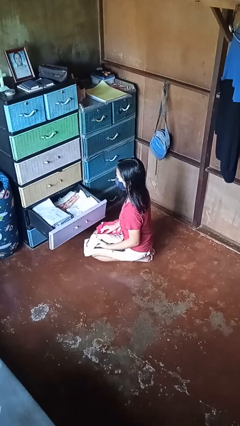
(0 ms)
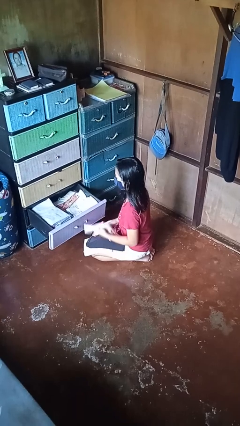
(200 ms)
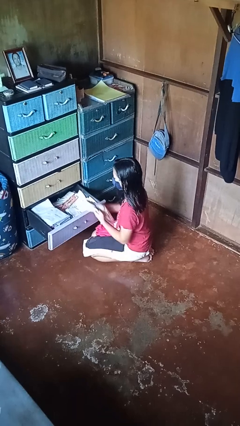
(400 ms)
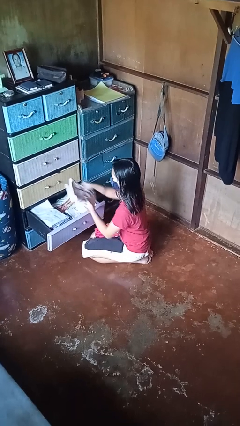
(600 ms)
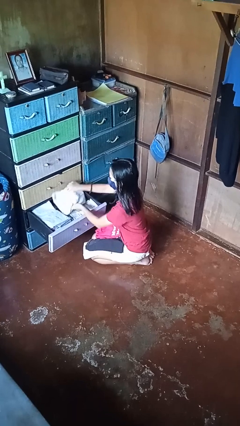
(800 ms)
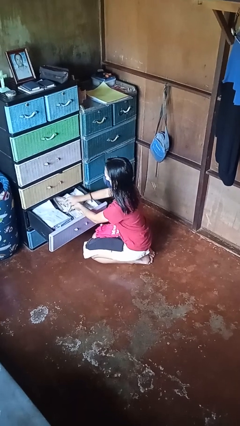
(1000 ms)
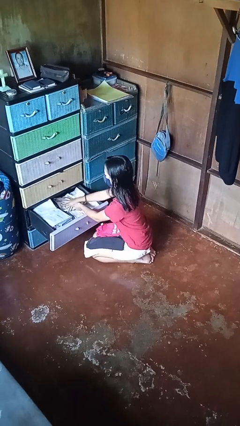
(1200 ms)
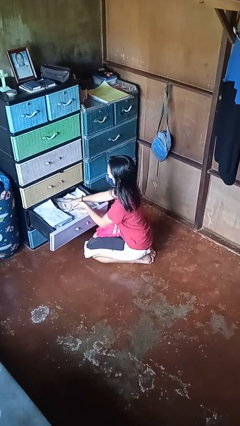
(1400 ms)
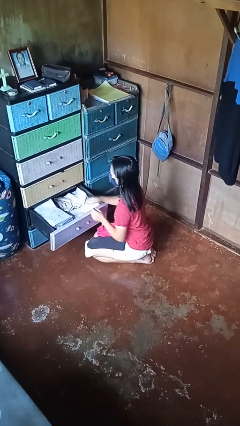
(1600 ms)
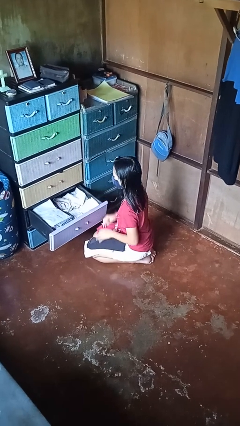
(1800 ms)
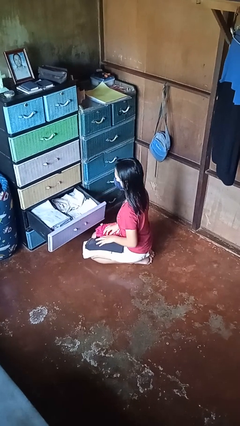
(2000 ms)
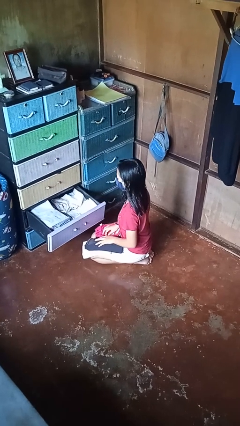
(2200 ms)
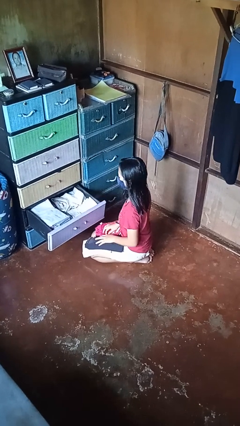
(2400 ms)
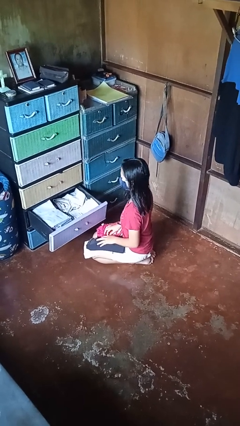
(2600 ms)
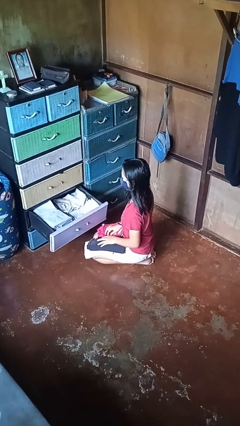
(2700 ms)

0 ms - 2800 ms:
person puts clothes into dresser

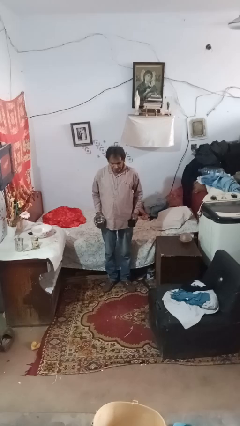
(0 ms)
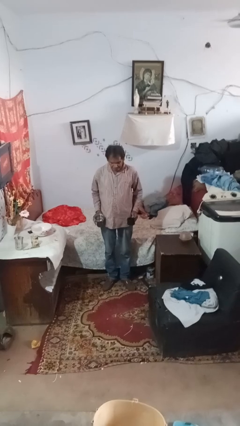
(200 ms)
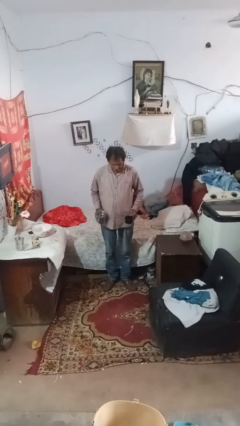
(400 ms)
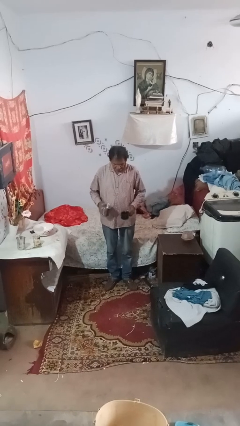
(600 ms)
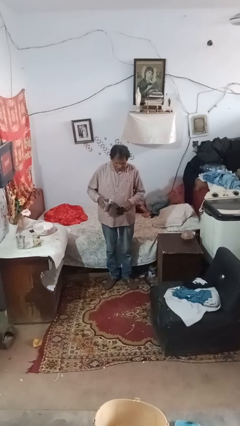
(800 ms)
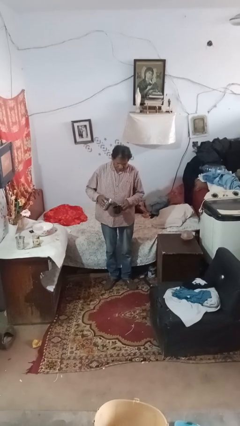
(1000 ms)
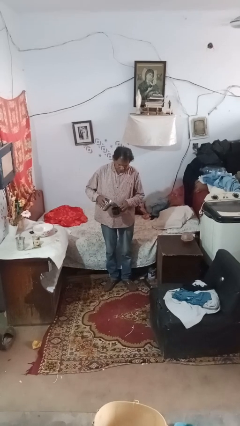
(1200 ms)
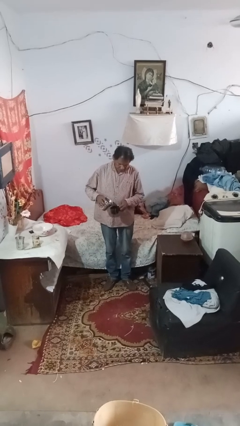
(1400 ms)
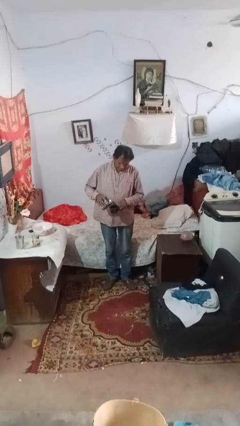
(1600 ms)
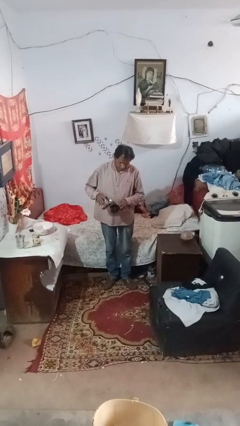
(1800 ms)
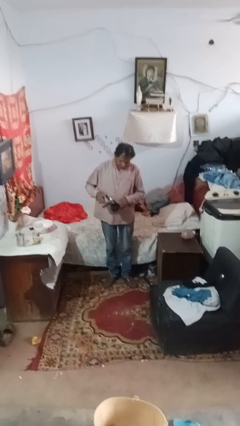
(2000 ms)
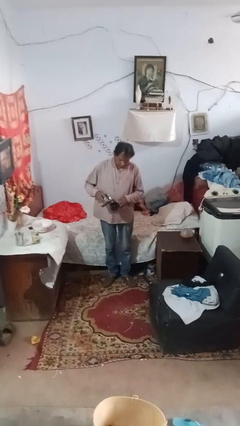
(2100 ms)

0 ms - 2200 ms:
person pours liquid into cup

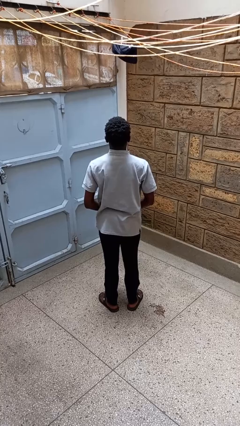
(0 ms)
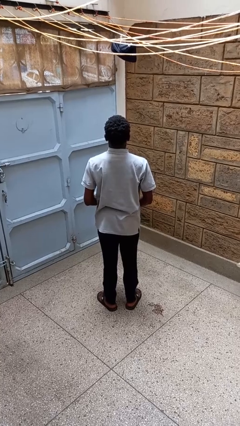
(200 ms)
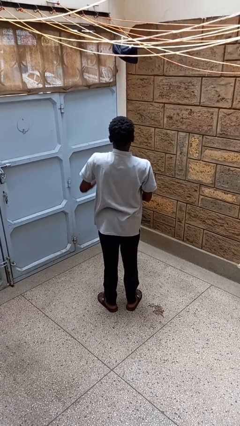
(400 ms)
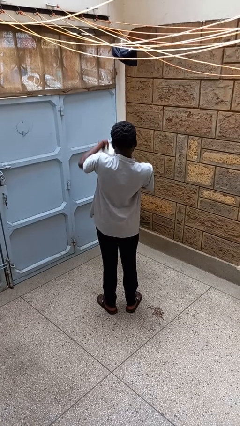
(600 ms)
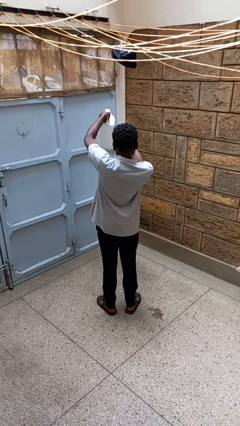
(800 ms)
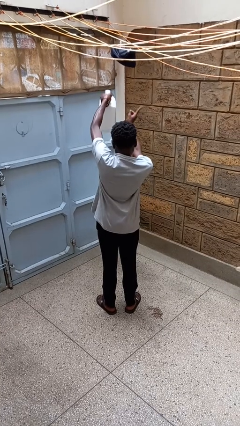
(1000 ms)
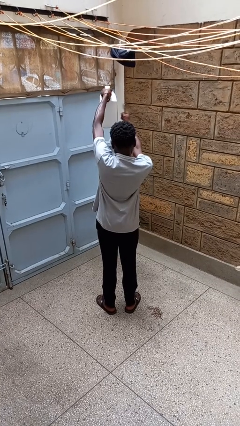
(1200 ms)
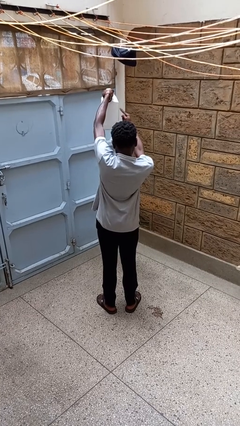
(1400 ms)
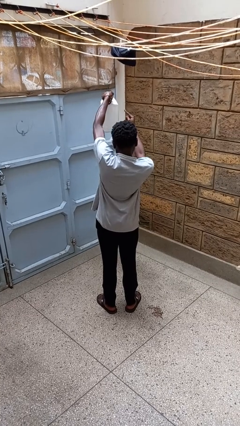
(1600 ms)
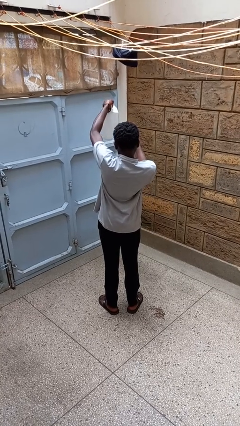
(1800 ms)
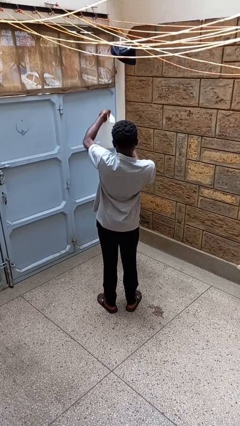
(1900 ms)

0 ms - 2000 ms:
person taps object with finger

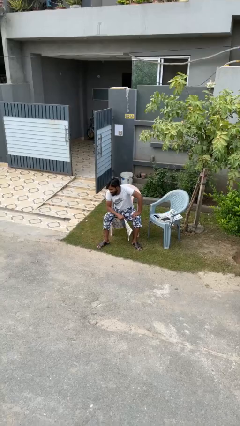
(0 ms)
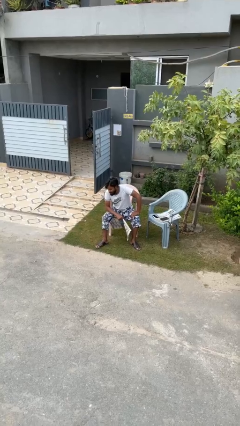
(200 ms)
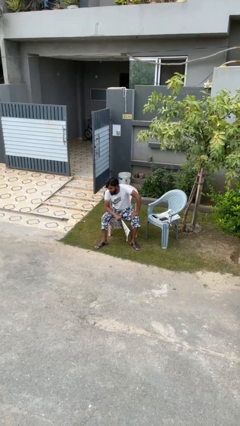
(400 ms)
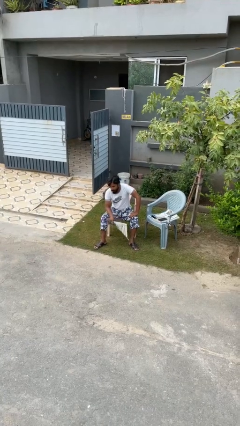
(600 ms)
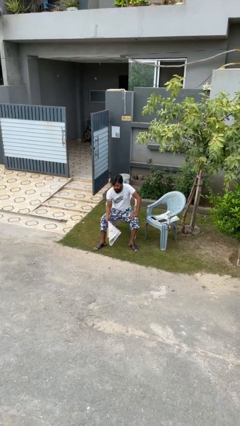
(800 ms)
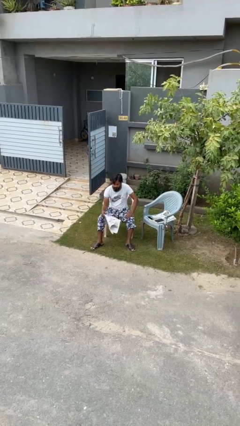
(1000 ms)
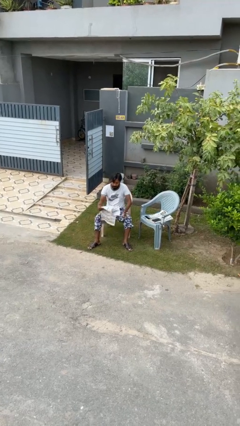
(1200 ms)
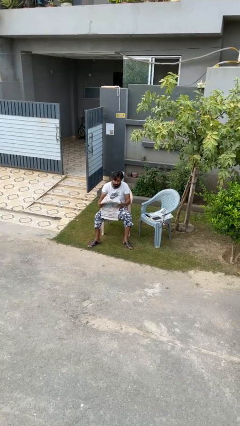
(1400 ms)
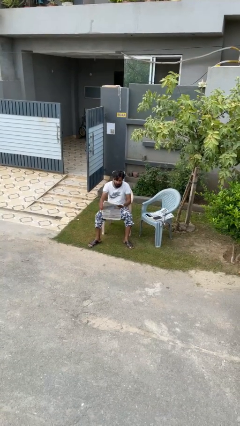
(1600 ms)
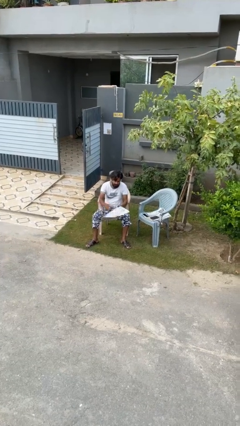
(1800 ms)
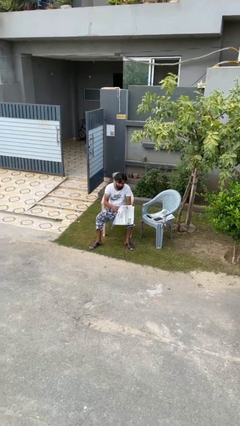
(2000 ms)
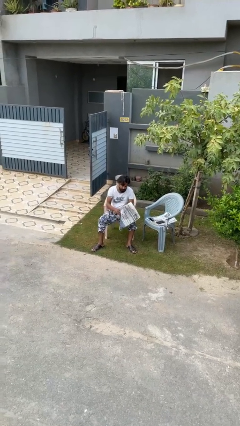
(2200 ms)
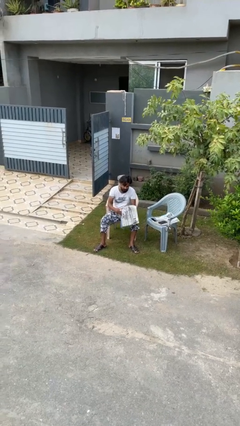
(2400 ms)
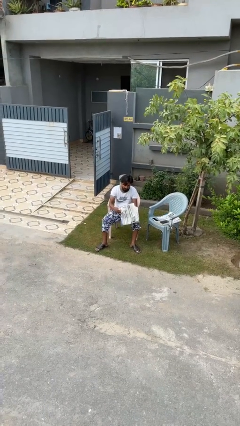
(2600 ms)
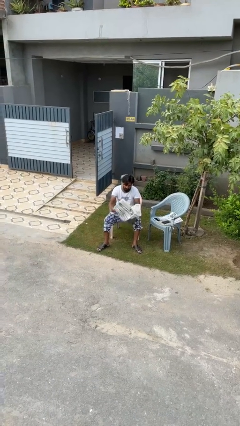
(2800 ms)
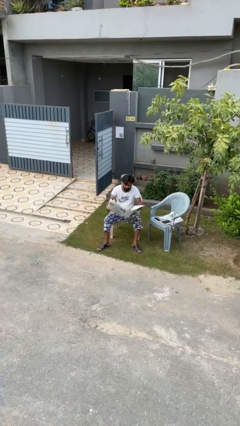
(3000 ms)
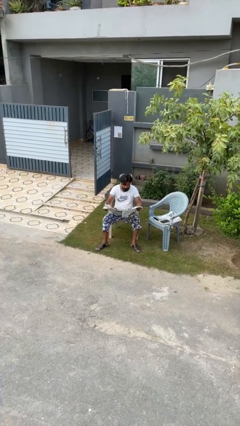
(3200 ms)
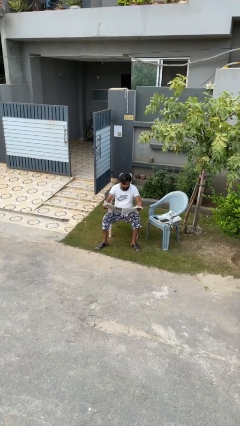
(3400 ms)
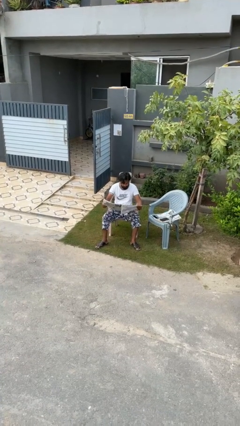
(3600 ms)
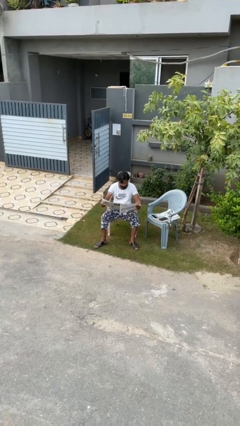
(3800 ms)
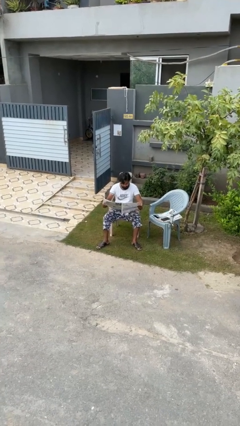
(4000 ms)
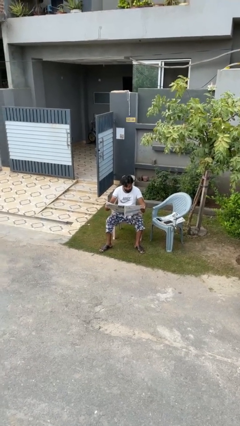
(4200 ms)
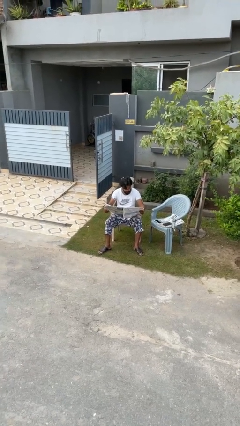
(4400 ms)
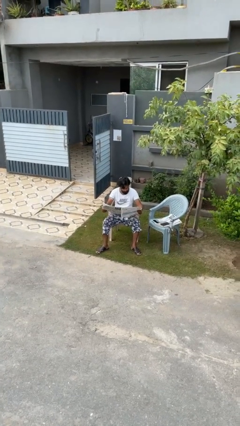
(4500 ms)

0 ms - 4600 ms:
person reads newspaper

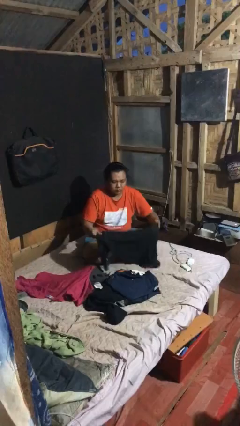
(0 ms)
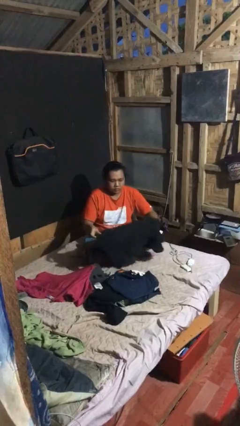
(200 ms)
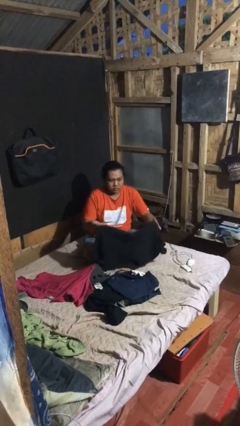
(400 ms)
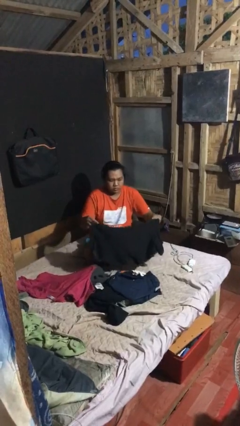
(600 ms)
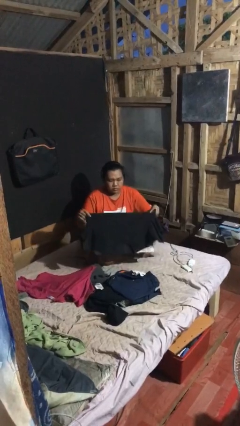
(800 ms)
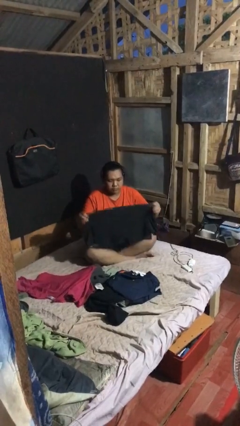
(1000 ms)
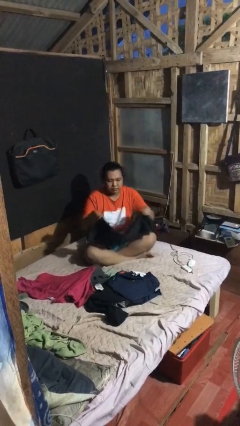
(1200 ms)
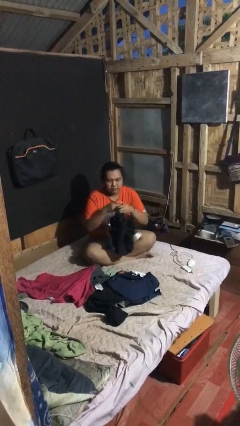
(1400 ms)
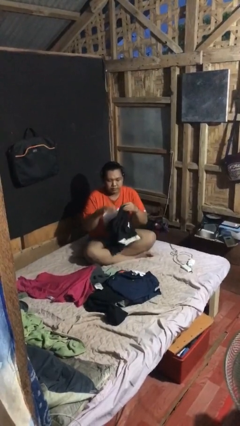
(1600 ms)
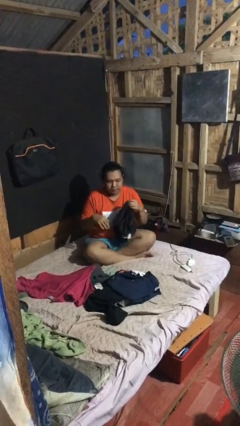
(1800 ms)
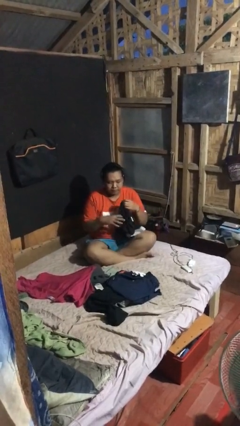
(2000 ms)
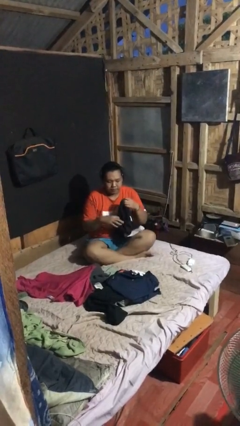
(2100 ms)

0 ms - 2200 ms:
person folds shirt

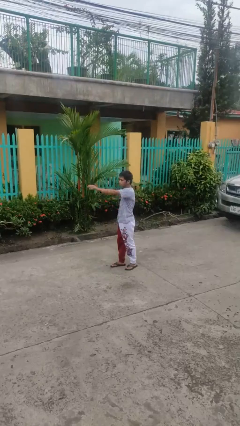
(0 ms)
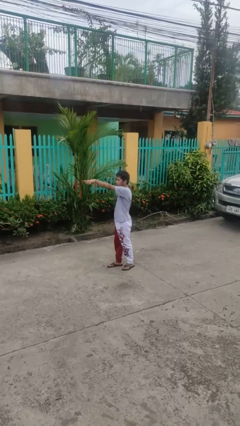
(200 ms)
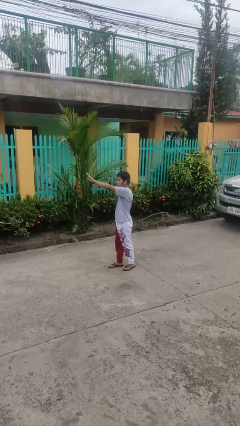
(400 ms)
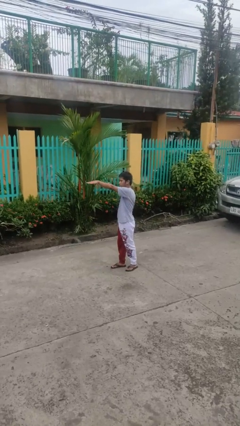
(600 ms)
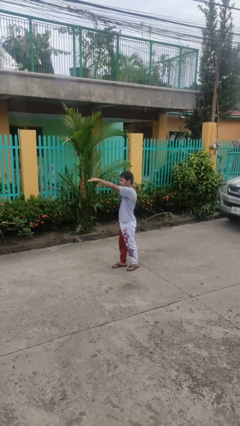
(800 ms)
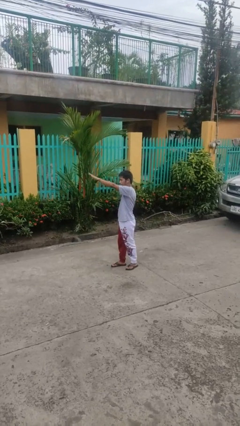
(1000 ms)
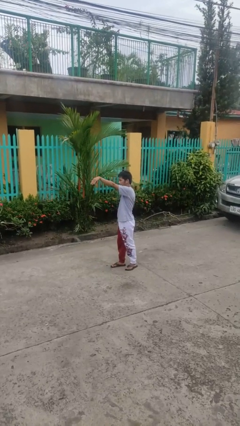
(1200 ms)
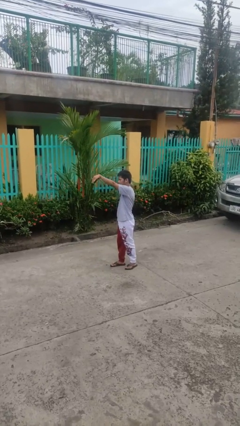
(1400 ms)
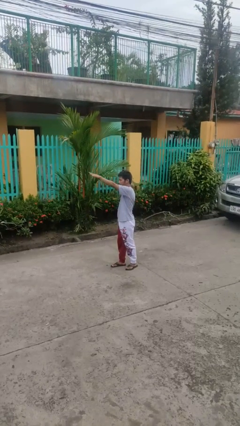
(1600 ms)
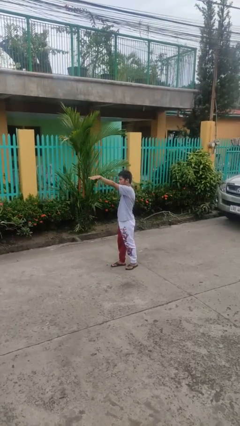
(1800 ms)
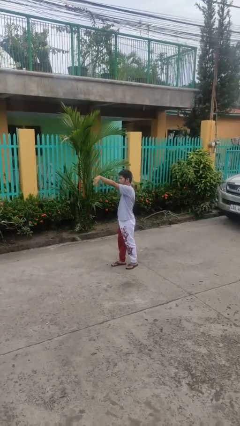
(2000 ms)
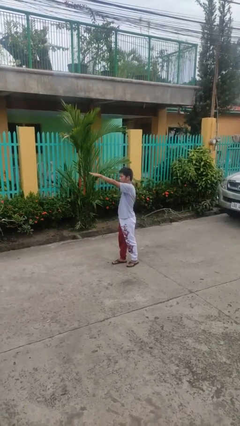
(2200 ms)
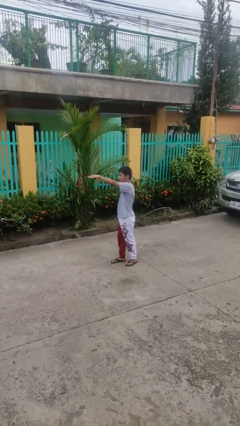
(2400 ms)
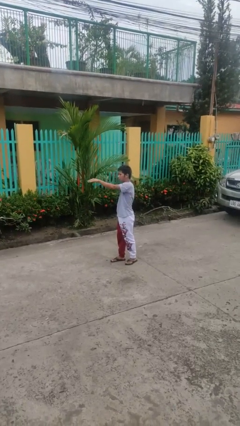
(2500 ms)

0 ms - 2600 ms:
person gestures come here

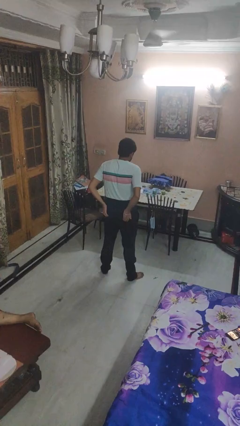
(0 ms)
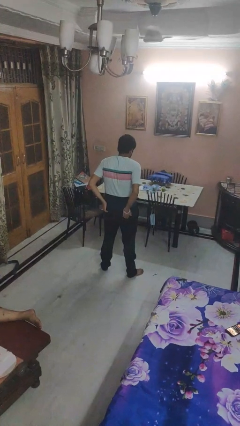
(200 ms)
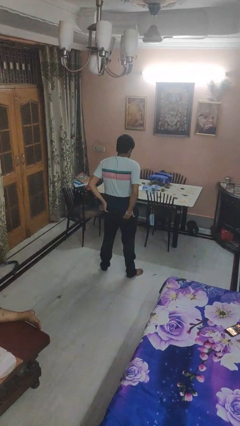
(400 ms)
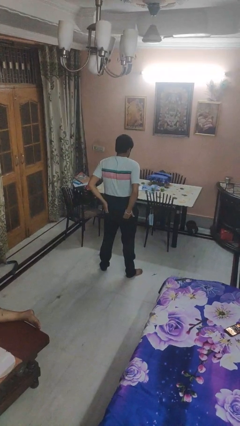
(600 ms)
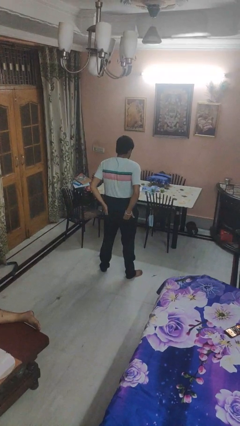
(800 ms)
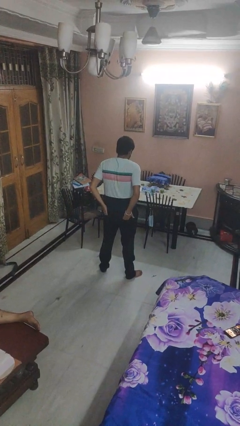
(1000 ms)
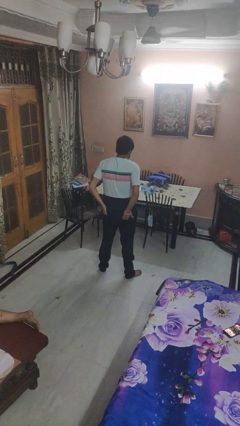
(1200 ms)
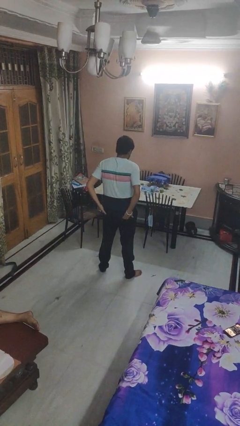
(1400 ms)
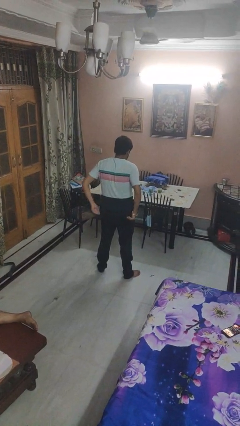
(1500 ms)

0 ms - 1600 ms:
person puts hands in back pockets
